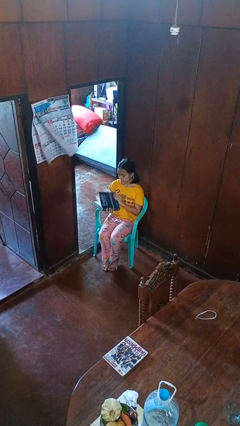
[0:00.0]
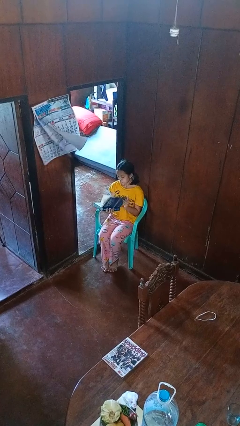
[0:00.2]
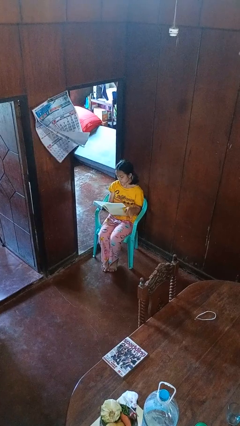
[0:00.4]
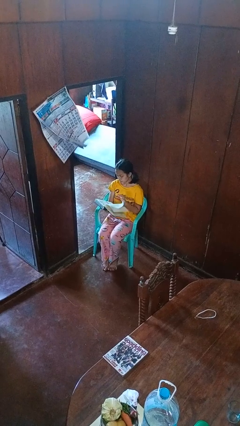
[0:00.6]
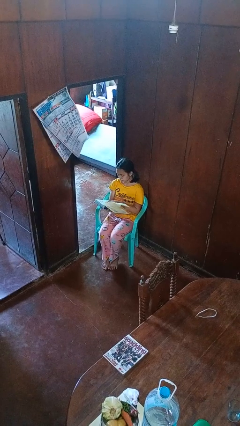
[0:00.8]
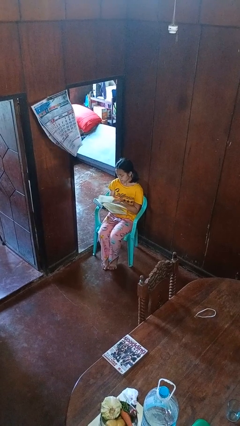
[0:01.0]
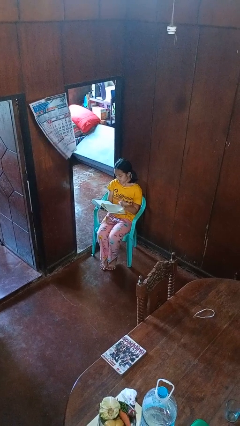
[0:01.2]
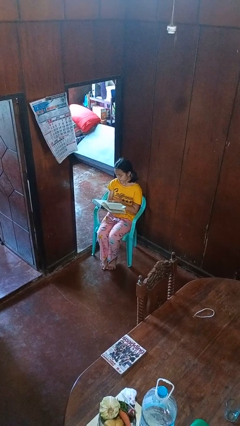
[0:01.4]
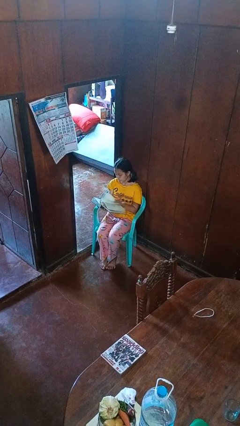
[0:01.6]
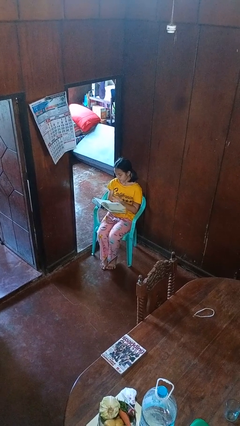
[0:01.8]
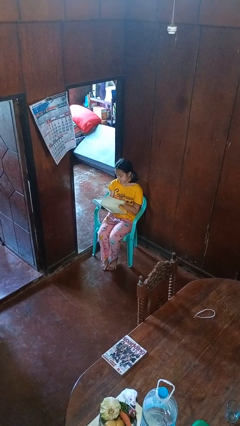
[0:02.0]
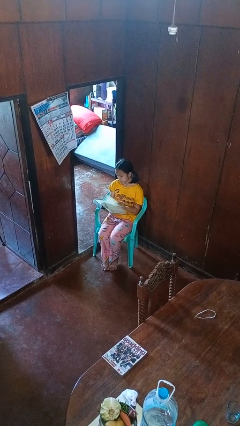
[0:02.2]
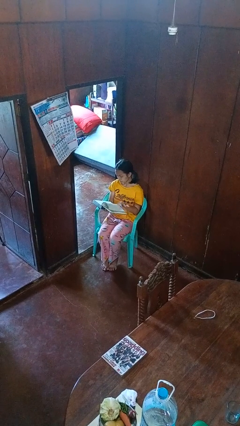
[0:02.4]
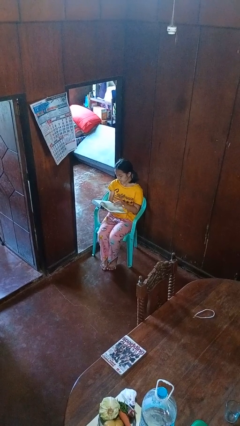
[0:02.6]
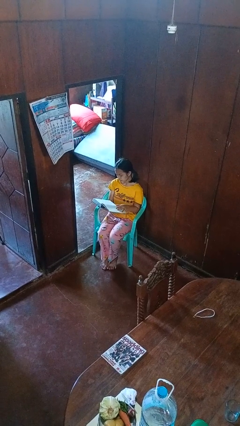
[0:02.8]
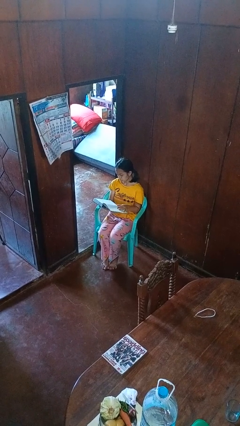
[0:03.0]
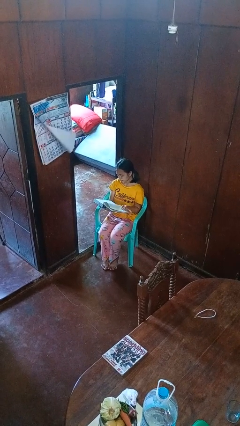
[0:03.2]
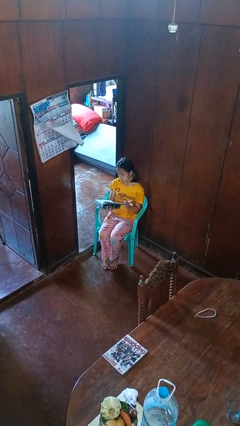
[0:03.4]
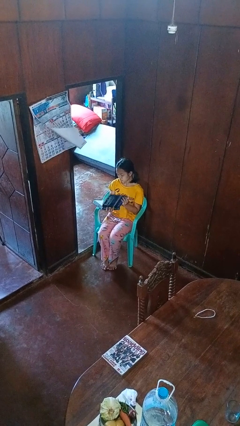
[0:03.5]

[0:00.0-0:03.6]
person reads book

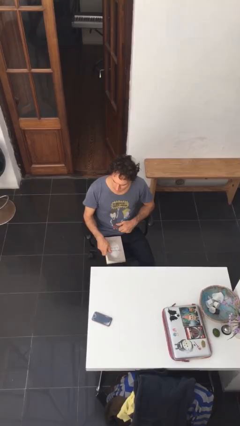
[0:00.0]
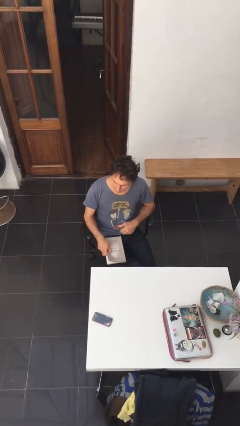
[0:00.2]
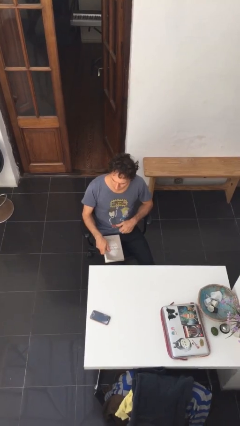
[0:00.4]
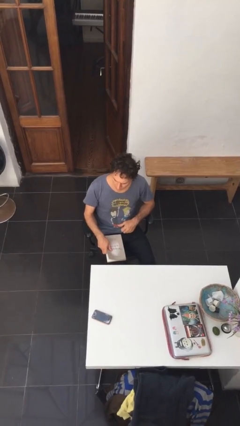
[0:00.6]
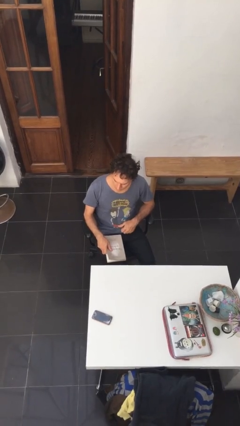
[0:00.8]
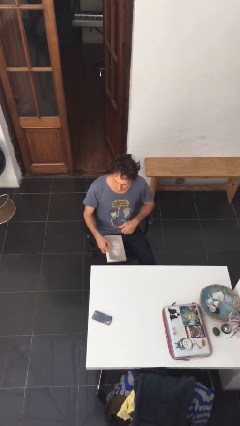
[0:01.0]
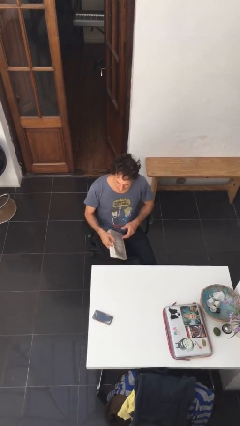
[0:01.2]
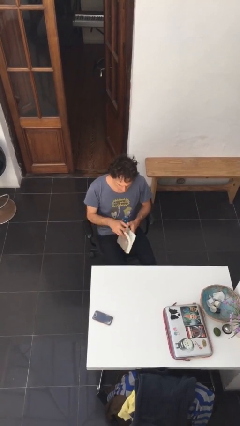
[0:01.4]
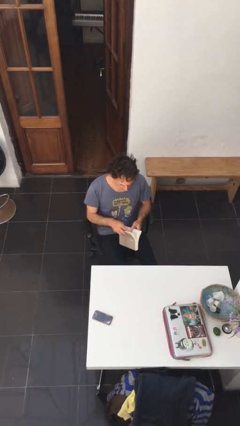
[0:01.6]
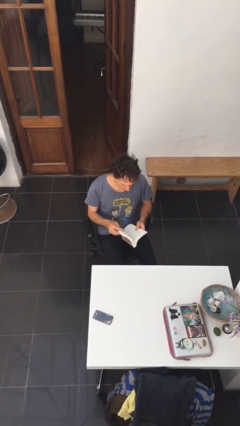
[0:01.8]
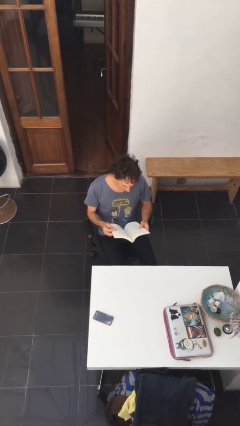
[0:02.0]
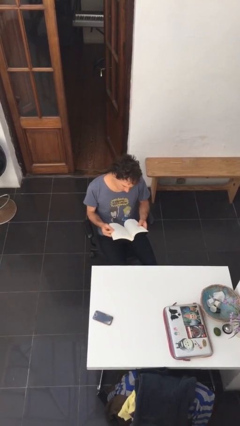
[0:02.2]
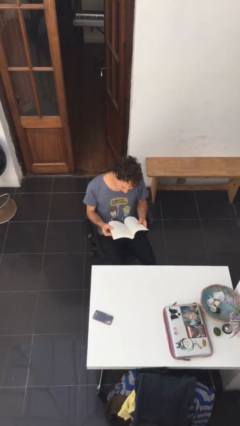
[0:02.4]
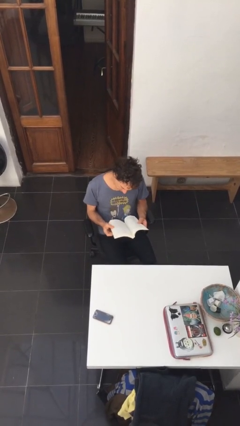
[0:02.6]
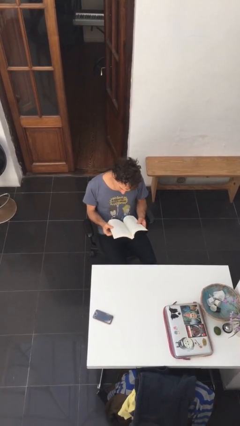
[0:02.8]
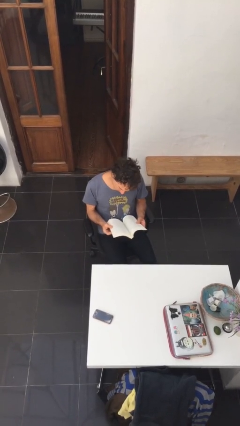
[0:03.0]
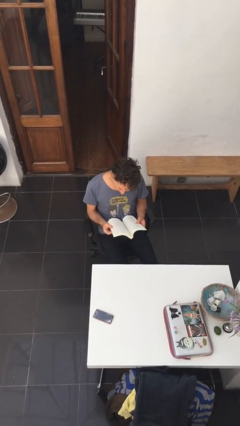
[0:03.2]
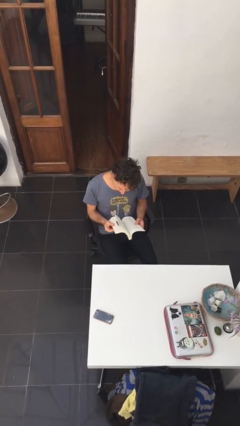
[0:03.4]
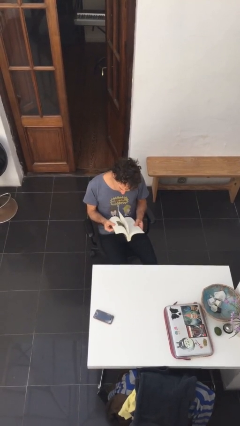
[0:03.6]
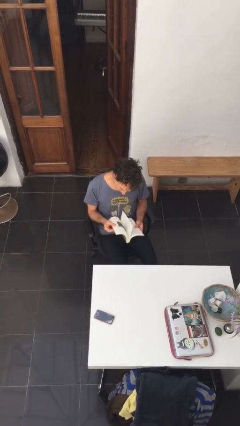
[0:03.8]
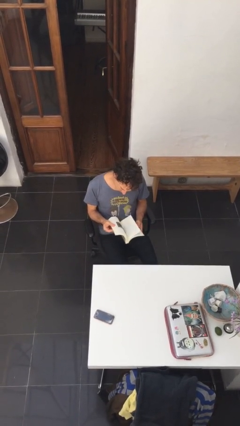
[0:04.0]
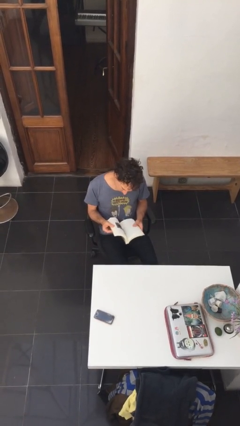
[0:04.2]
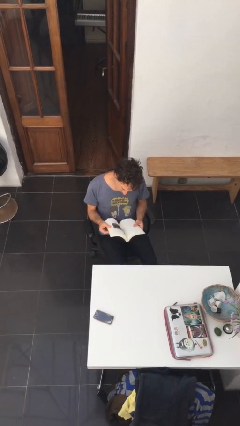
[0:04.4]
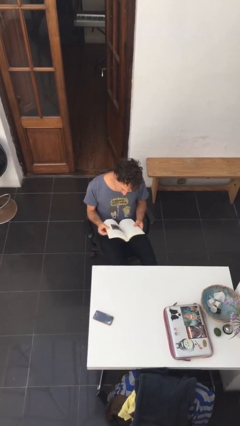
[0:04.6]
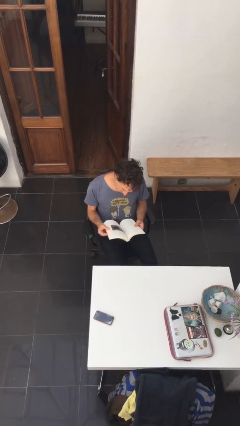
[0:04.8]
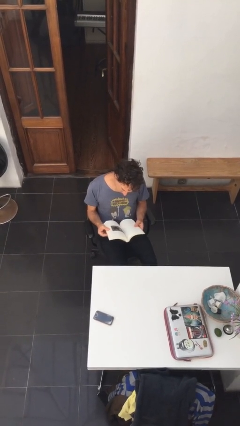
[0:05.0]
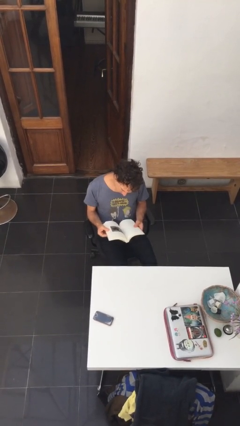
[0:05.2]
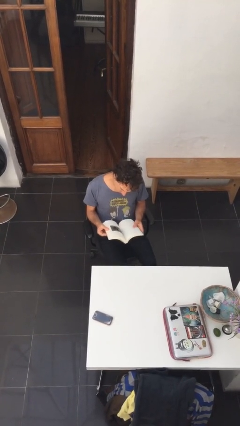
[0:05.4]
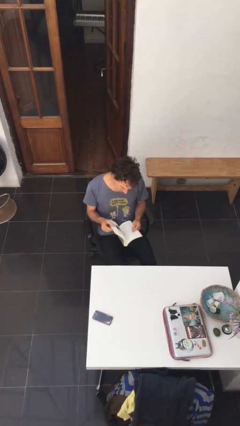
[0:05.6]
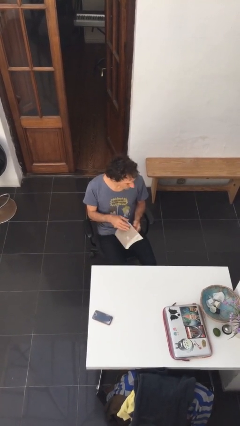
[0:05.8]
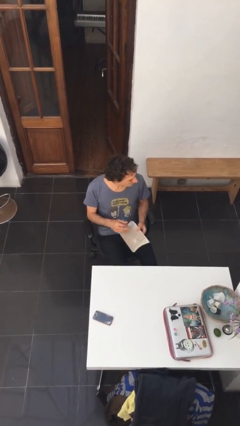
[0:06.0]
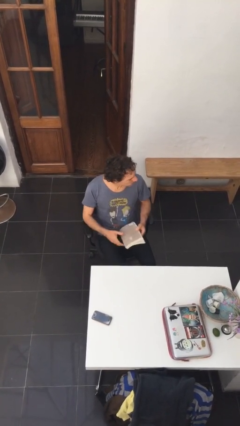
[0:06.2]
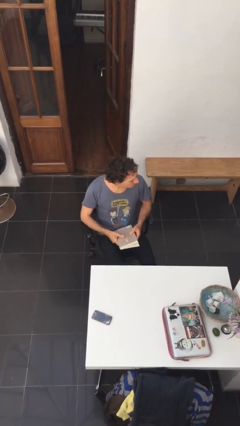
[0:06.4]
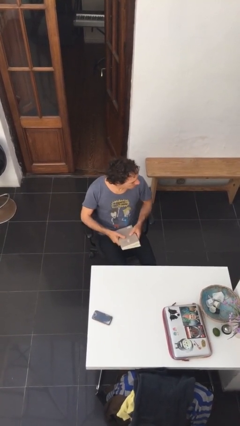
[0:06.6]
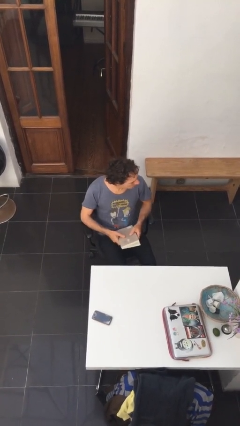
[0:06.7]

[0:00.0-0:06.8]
person reads document

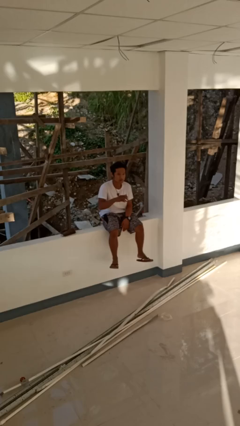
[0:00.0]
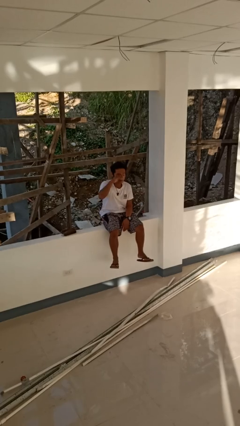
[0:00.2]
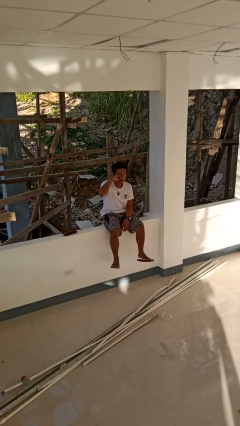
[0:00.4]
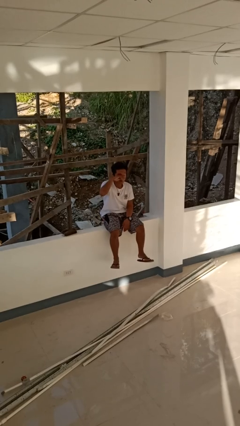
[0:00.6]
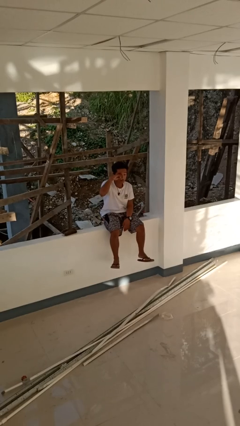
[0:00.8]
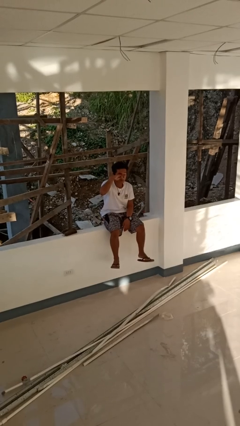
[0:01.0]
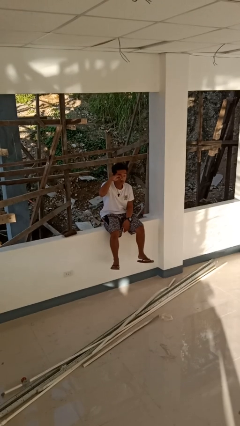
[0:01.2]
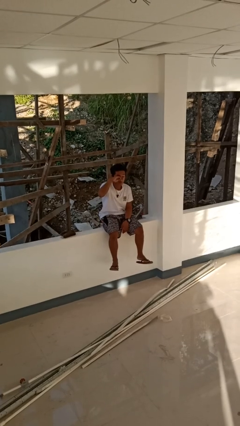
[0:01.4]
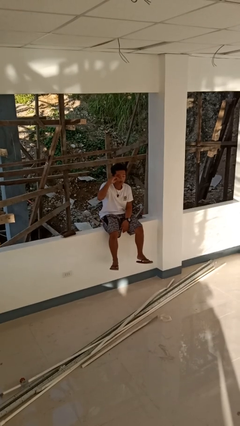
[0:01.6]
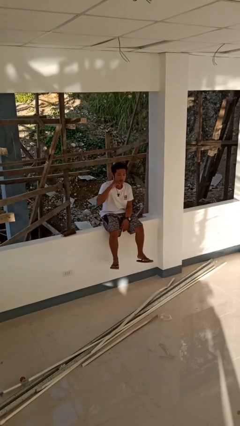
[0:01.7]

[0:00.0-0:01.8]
person rubs eyes

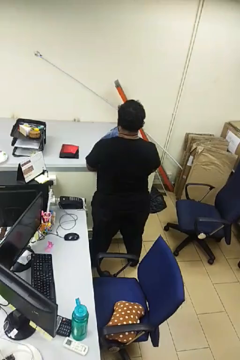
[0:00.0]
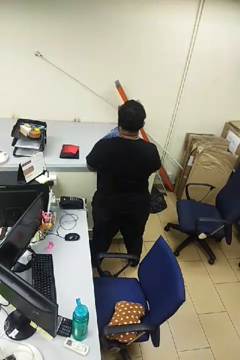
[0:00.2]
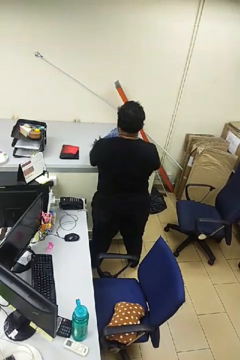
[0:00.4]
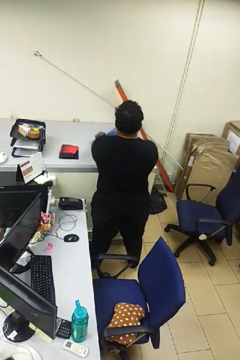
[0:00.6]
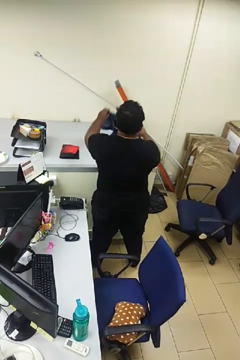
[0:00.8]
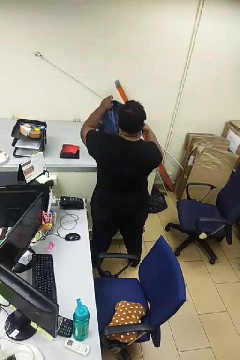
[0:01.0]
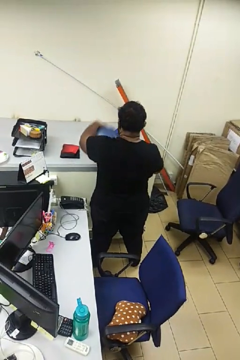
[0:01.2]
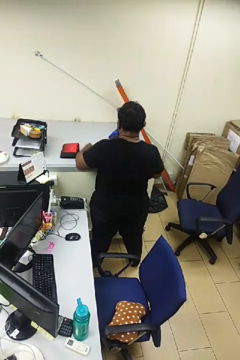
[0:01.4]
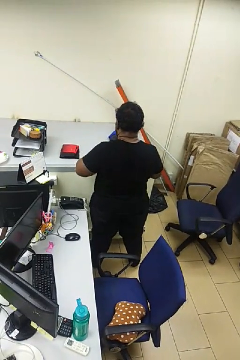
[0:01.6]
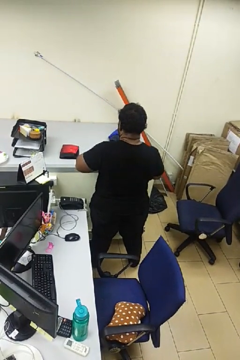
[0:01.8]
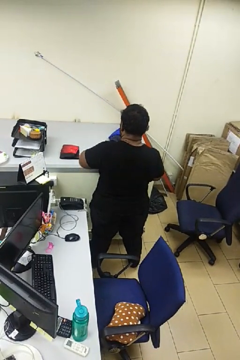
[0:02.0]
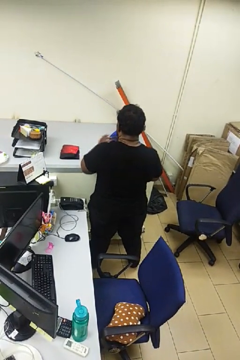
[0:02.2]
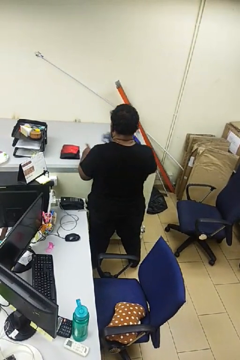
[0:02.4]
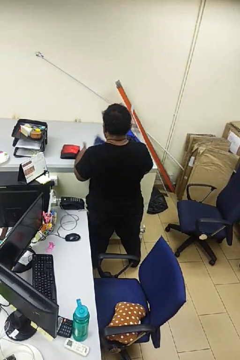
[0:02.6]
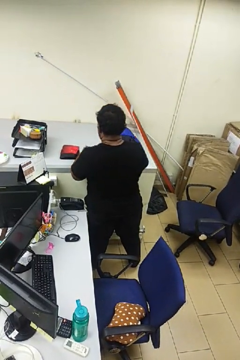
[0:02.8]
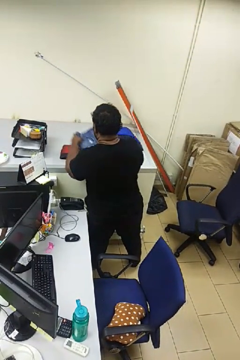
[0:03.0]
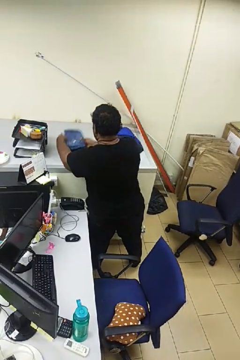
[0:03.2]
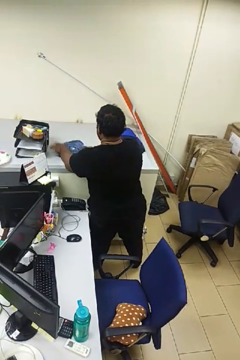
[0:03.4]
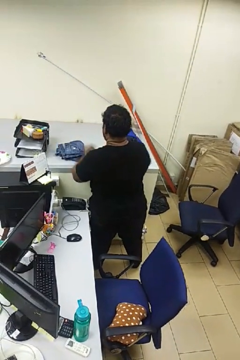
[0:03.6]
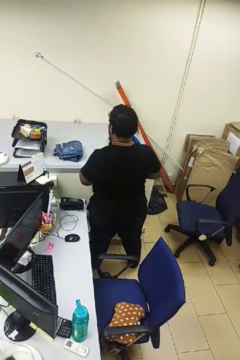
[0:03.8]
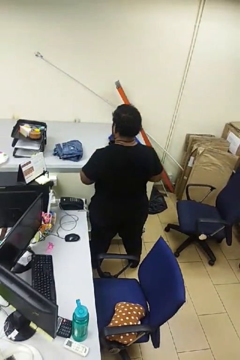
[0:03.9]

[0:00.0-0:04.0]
person folds pants

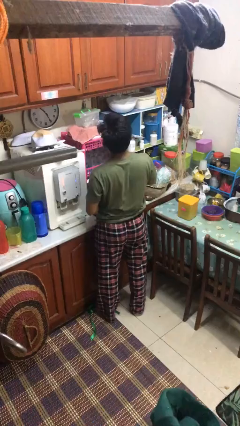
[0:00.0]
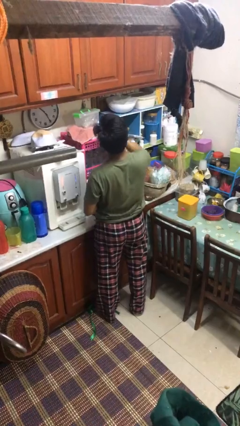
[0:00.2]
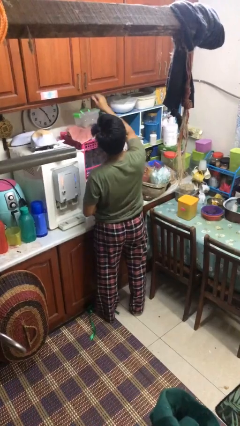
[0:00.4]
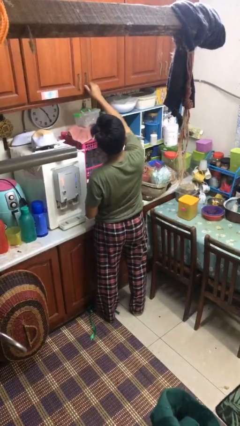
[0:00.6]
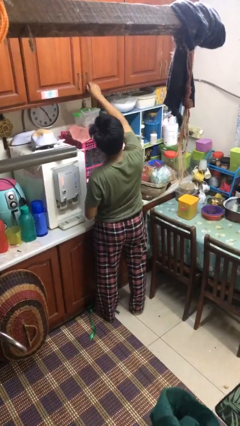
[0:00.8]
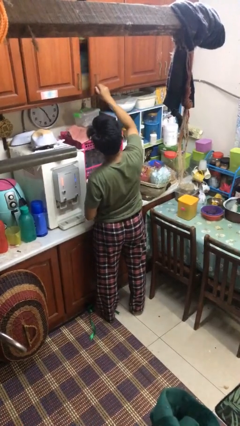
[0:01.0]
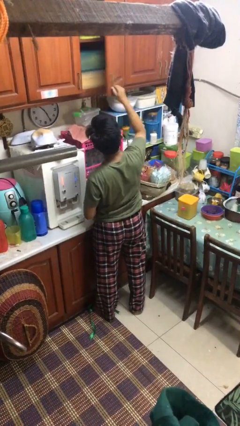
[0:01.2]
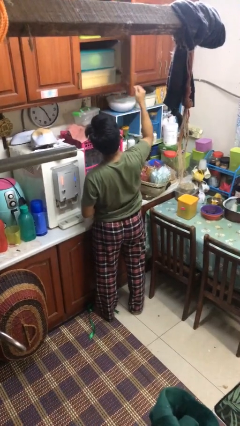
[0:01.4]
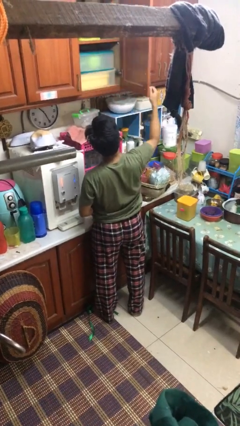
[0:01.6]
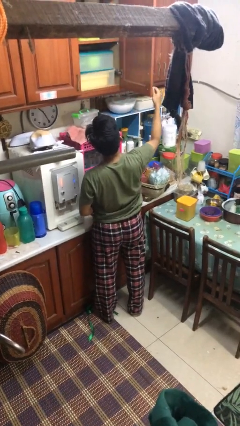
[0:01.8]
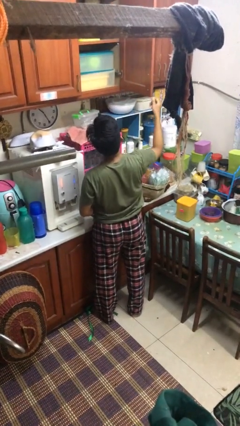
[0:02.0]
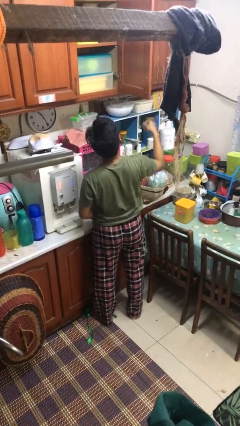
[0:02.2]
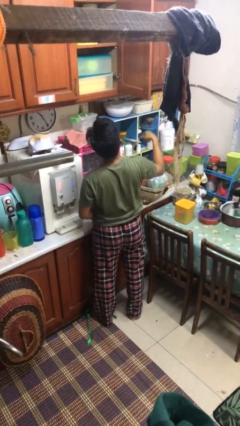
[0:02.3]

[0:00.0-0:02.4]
person opens kitchen drawer
